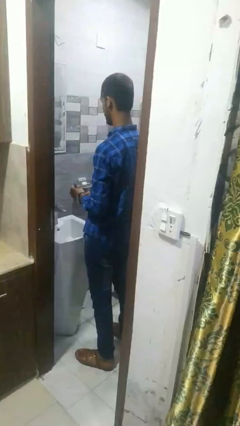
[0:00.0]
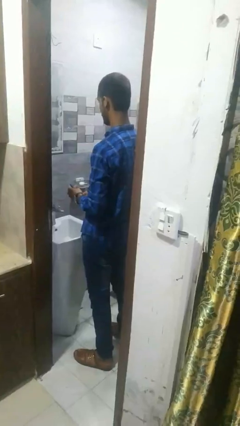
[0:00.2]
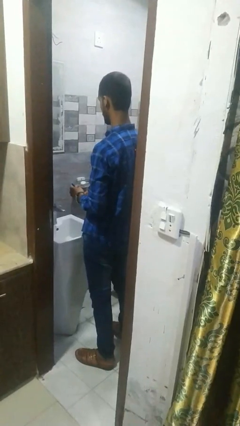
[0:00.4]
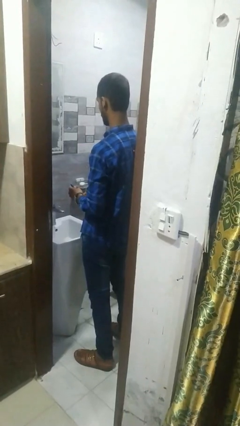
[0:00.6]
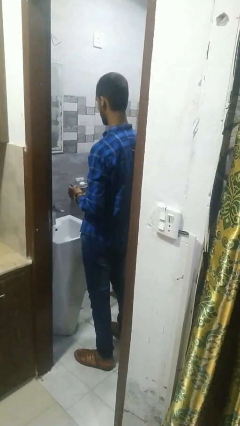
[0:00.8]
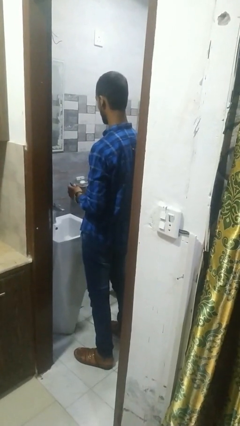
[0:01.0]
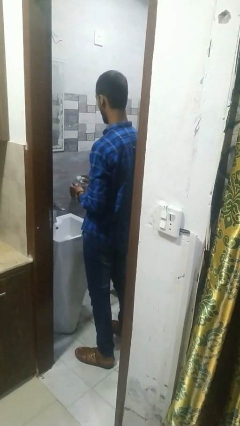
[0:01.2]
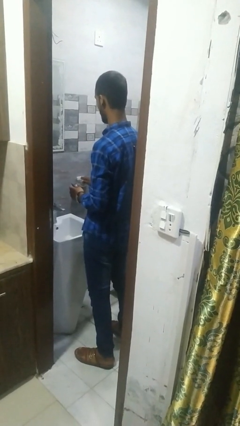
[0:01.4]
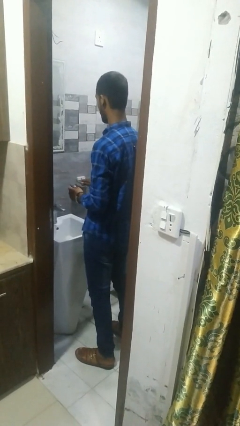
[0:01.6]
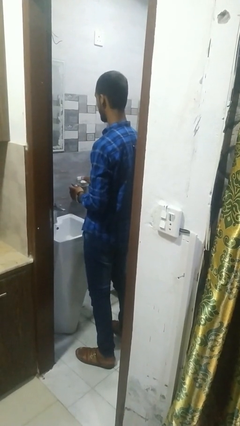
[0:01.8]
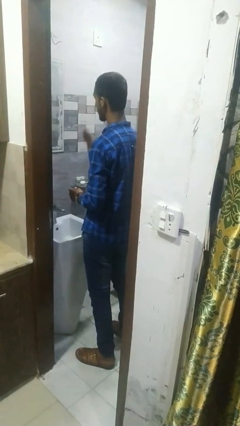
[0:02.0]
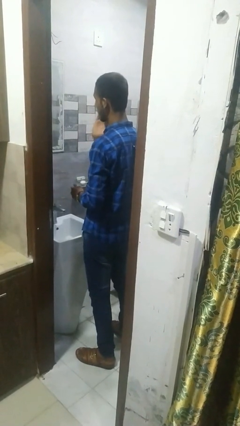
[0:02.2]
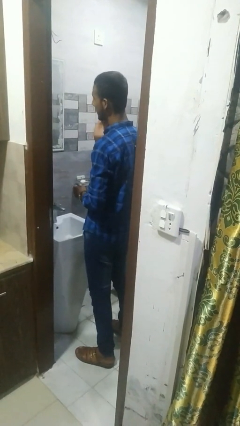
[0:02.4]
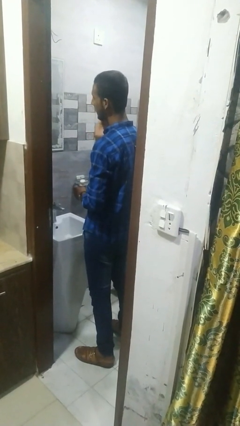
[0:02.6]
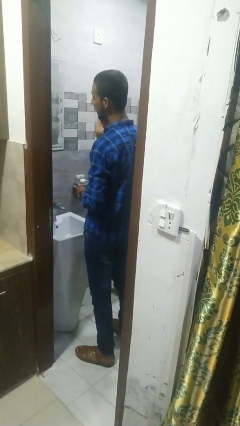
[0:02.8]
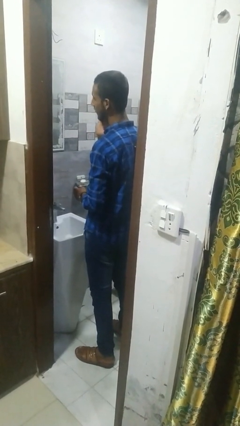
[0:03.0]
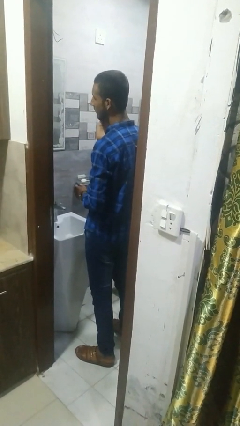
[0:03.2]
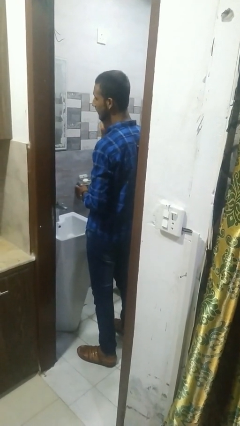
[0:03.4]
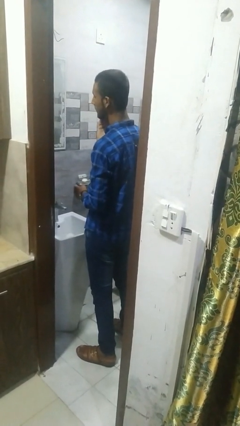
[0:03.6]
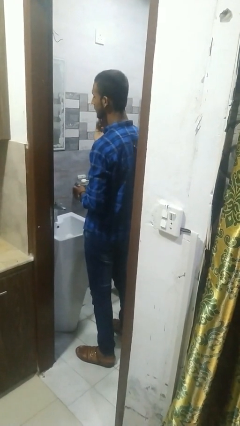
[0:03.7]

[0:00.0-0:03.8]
person applies shaving cream

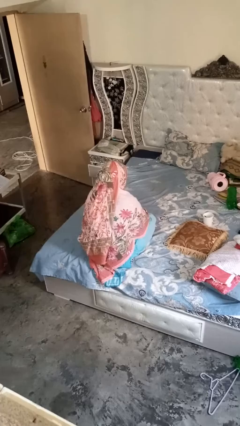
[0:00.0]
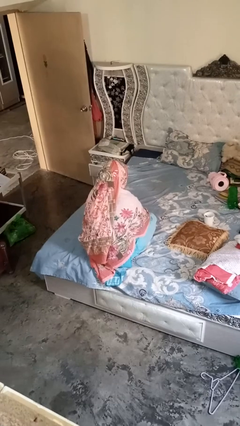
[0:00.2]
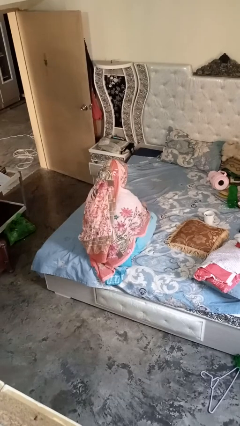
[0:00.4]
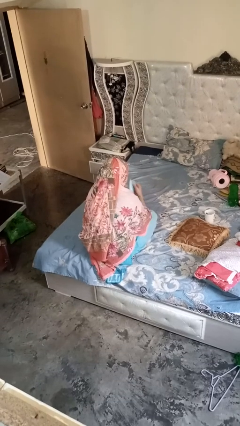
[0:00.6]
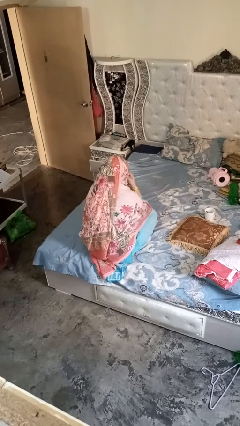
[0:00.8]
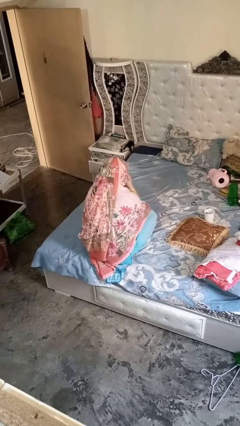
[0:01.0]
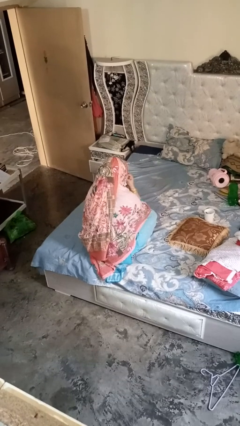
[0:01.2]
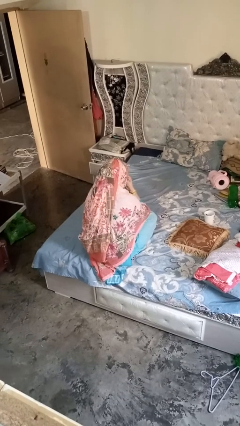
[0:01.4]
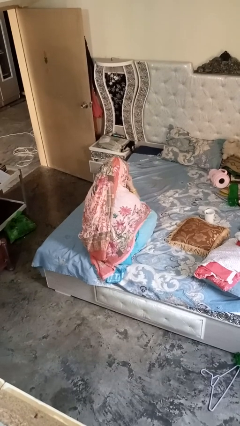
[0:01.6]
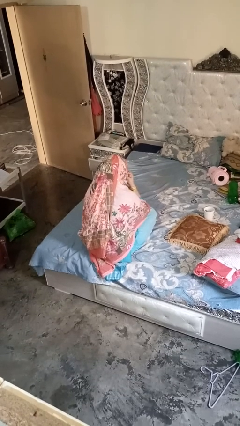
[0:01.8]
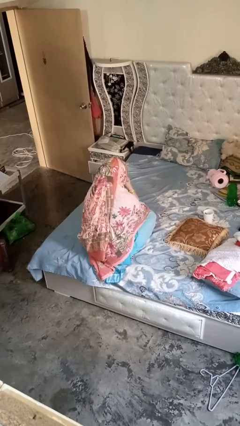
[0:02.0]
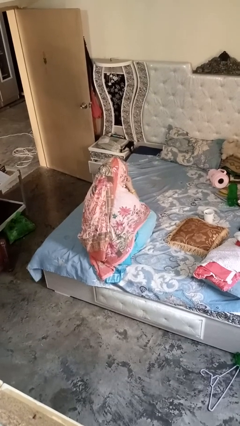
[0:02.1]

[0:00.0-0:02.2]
person blows nose

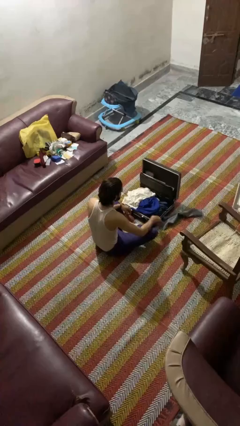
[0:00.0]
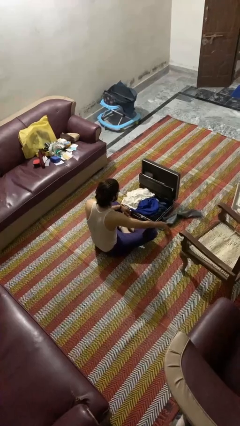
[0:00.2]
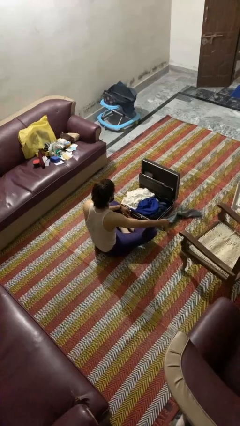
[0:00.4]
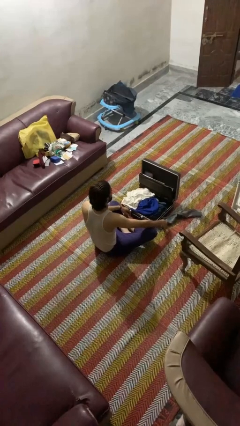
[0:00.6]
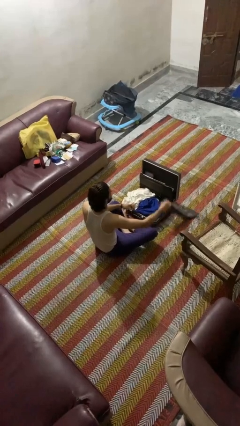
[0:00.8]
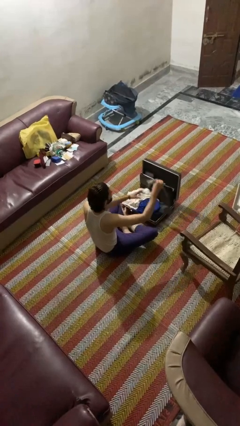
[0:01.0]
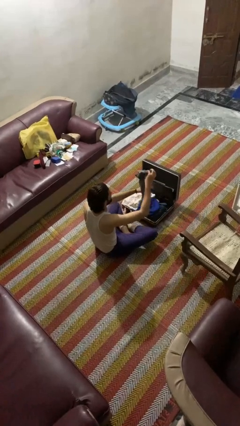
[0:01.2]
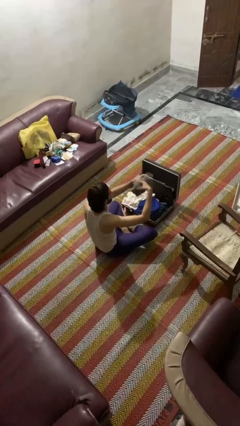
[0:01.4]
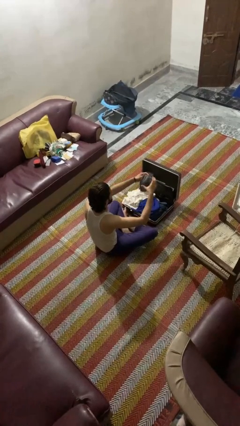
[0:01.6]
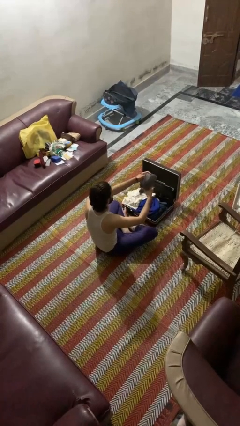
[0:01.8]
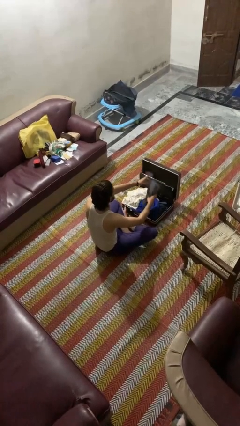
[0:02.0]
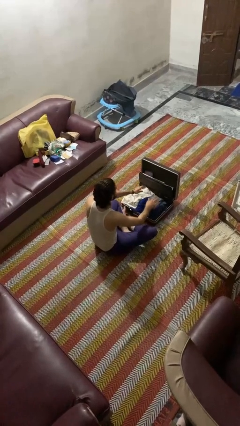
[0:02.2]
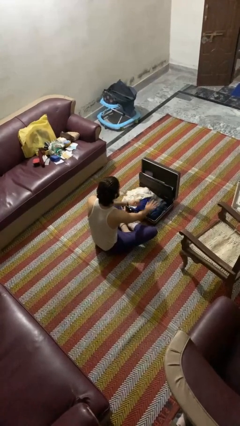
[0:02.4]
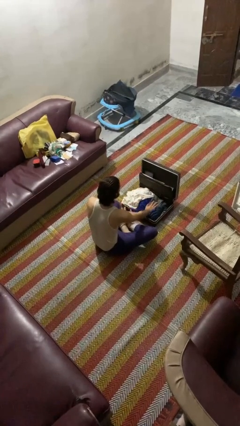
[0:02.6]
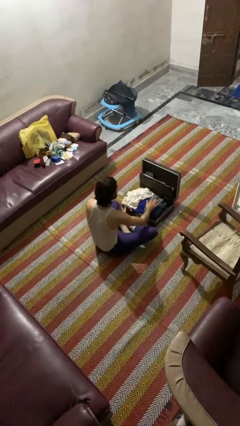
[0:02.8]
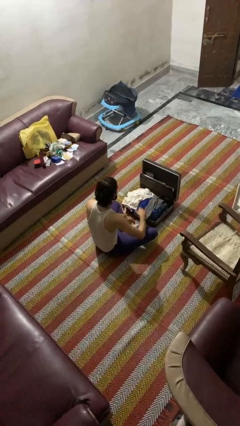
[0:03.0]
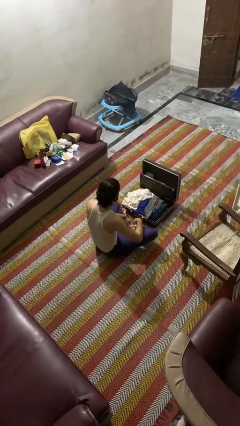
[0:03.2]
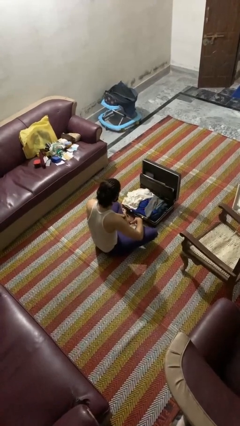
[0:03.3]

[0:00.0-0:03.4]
person loads clothes into suitcase

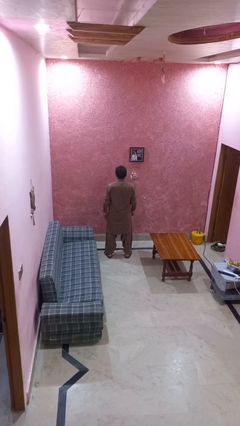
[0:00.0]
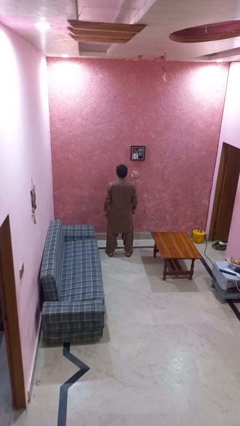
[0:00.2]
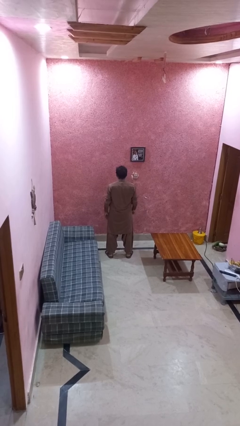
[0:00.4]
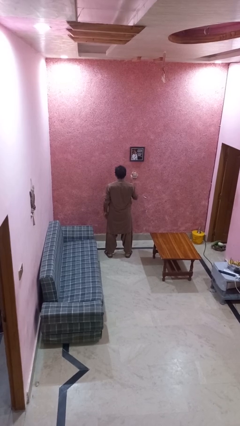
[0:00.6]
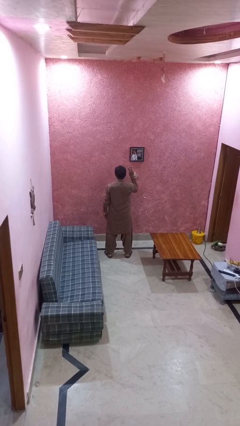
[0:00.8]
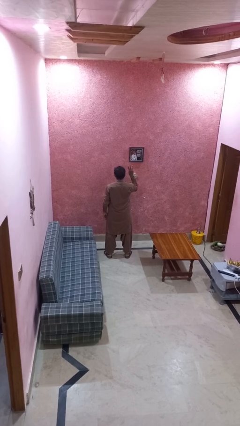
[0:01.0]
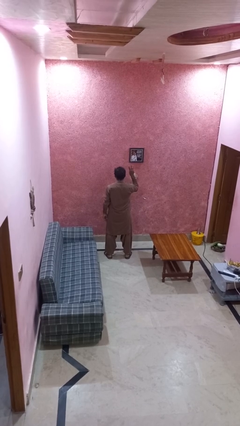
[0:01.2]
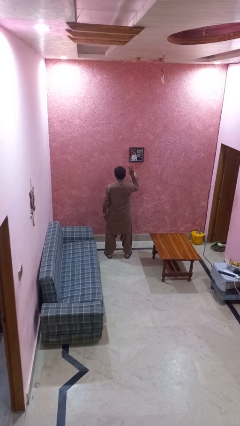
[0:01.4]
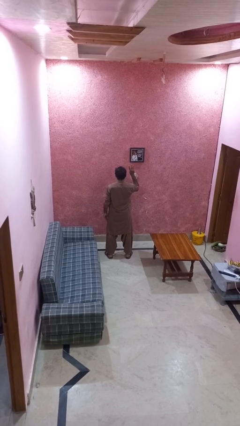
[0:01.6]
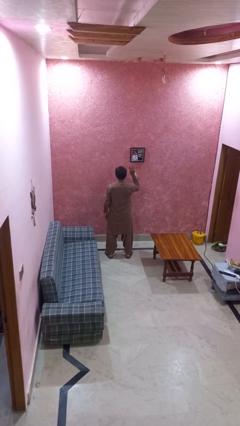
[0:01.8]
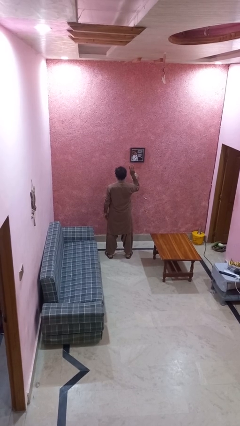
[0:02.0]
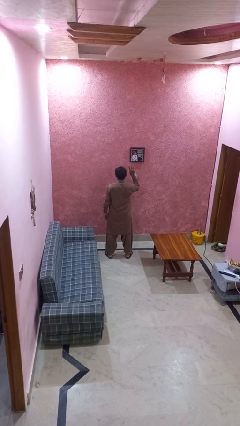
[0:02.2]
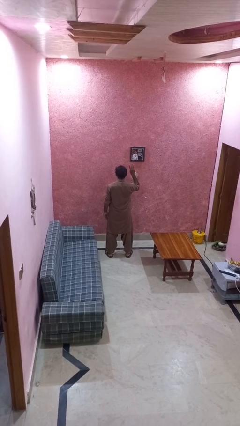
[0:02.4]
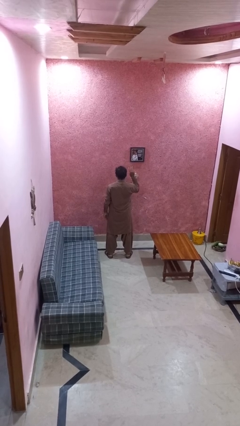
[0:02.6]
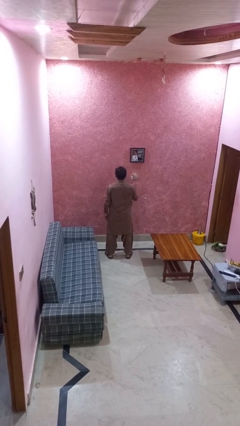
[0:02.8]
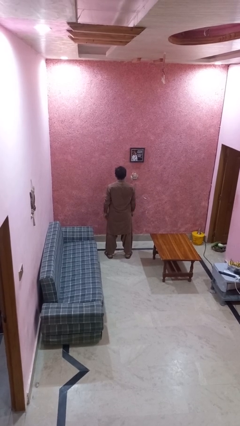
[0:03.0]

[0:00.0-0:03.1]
person gestures number three

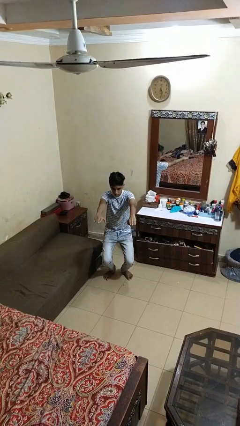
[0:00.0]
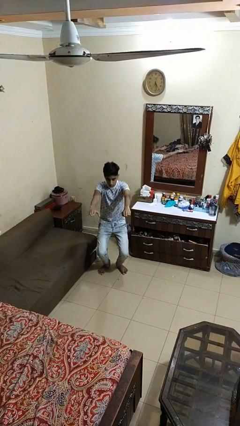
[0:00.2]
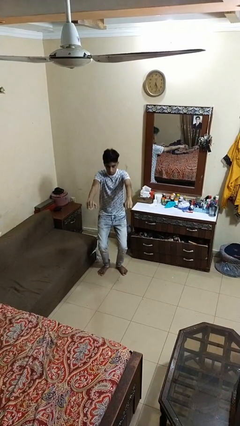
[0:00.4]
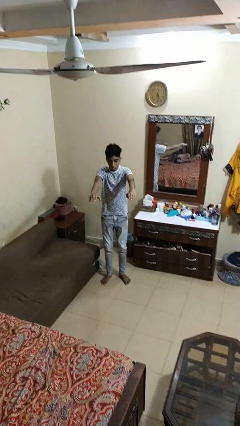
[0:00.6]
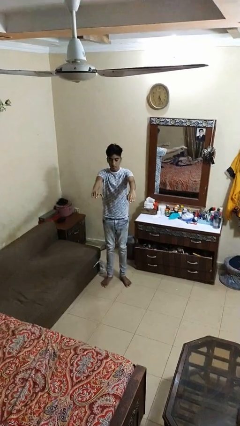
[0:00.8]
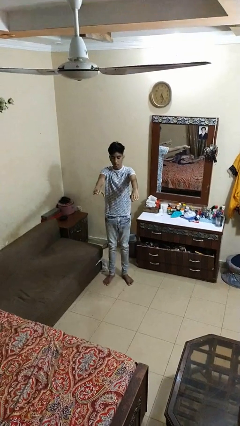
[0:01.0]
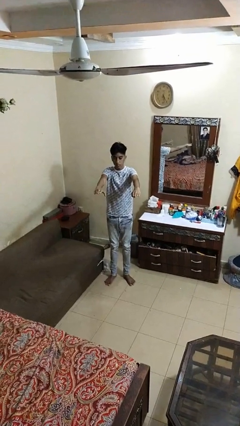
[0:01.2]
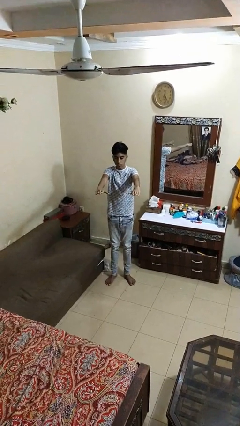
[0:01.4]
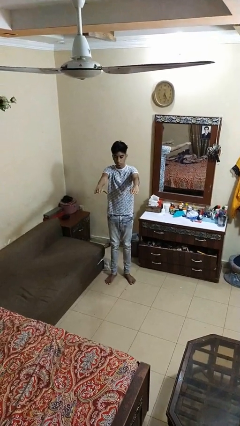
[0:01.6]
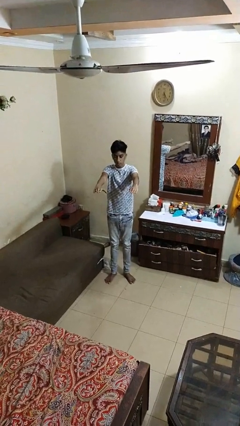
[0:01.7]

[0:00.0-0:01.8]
person stands up

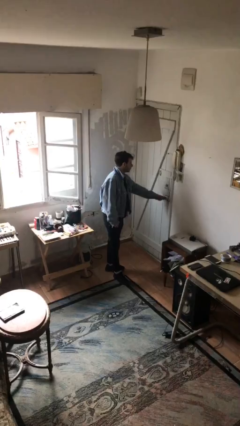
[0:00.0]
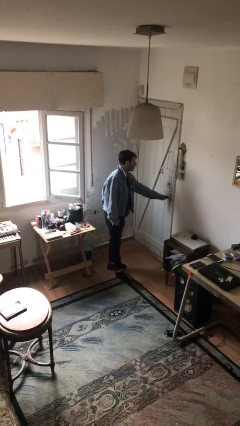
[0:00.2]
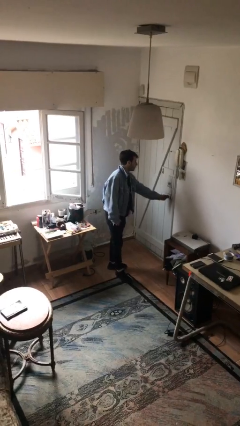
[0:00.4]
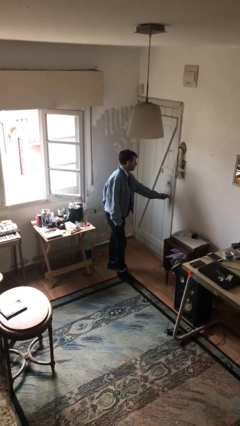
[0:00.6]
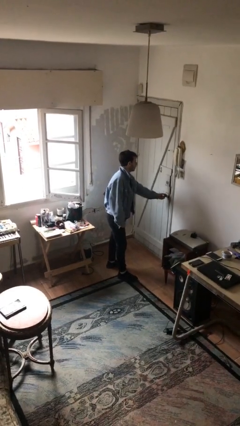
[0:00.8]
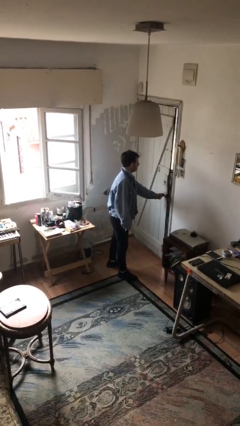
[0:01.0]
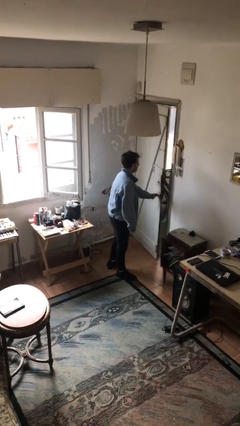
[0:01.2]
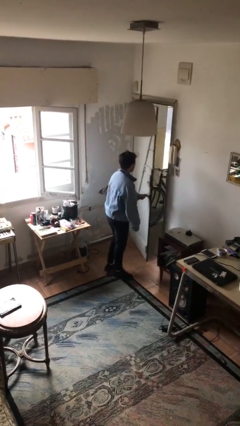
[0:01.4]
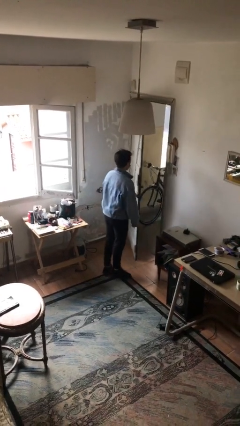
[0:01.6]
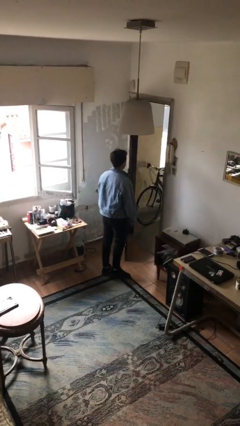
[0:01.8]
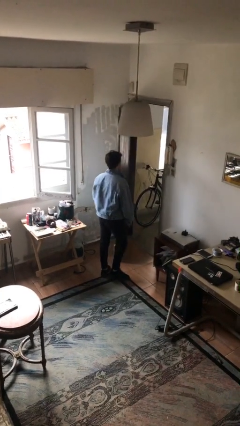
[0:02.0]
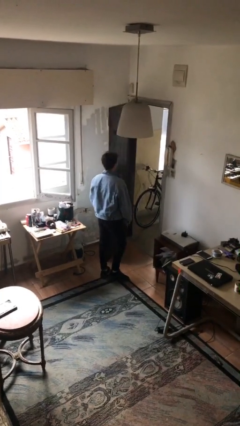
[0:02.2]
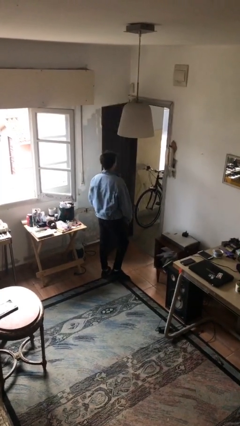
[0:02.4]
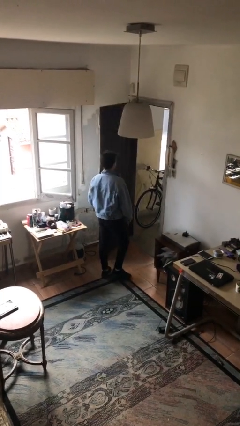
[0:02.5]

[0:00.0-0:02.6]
person opens facility door

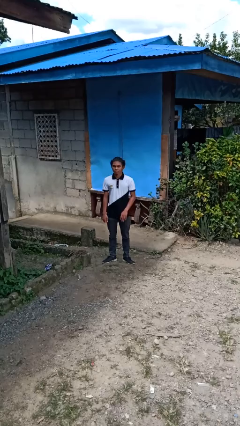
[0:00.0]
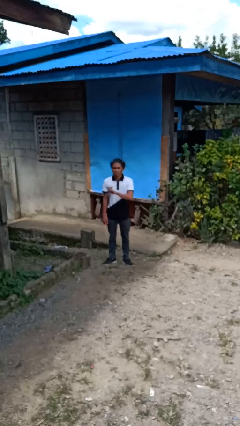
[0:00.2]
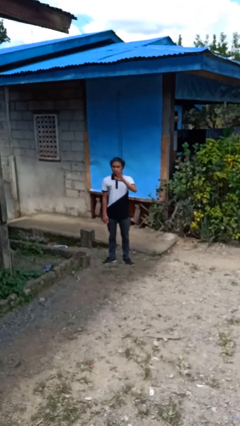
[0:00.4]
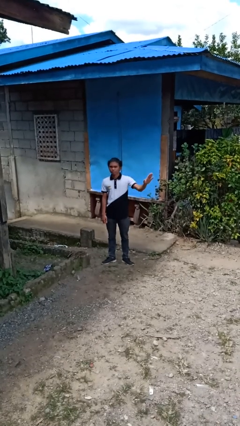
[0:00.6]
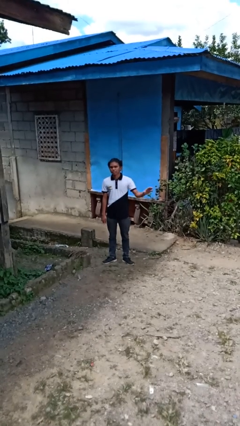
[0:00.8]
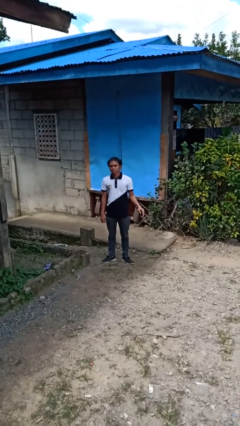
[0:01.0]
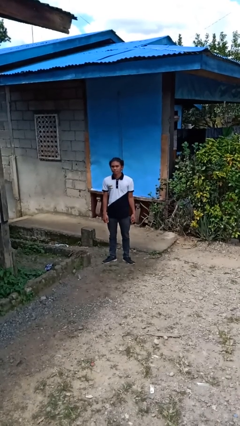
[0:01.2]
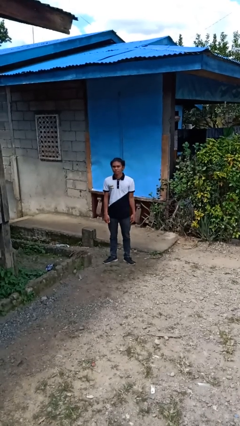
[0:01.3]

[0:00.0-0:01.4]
person gestures swipe left
